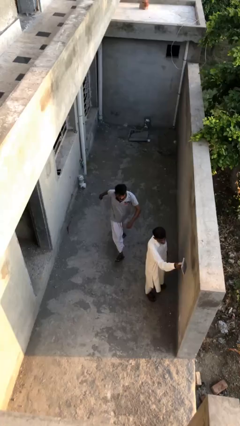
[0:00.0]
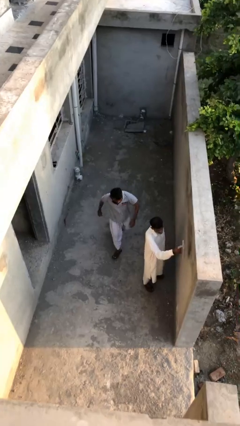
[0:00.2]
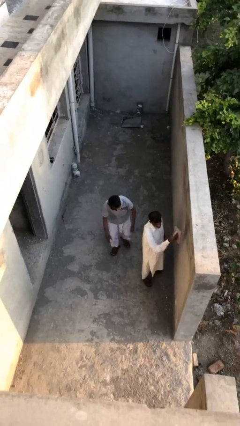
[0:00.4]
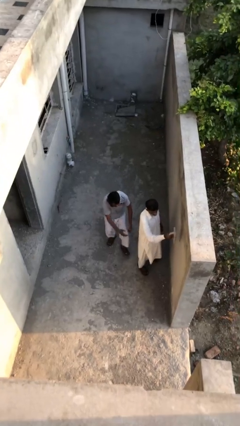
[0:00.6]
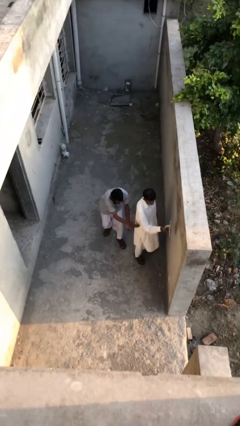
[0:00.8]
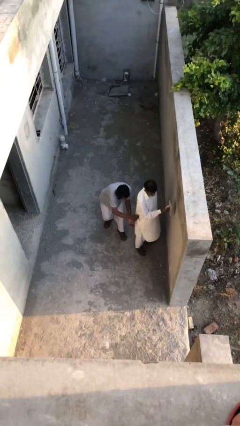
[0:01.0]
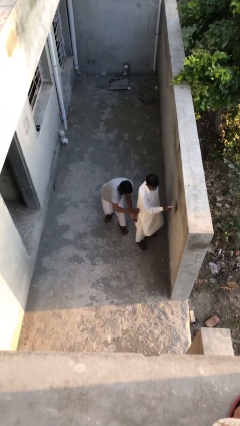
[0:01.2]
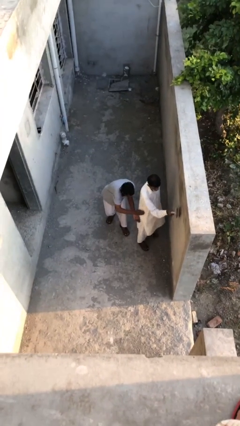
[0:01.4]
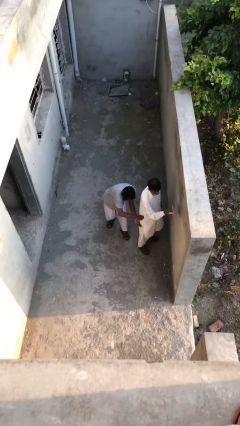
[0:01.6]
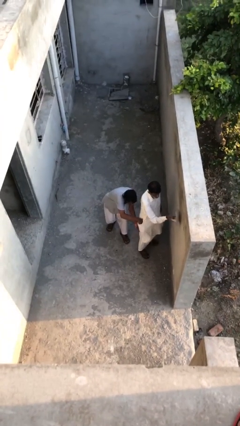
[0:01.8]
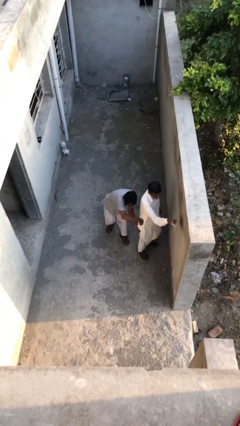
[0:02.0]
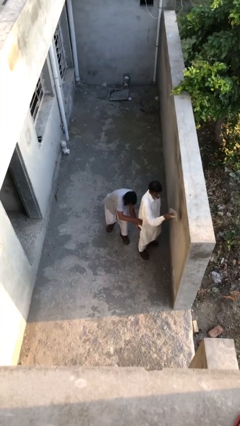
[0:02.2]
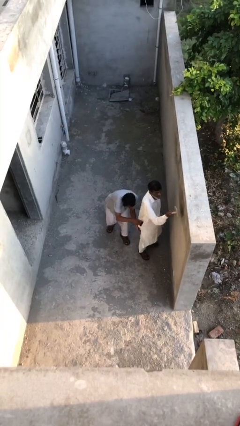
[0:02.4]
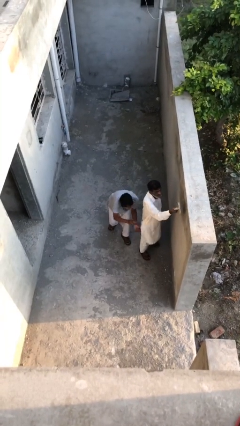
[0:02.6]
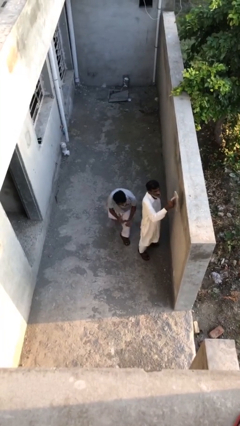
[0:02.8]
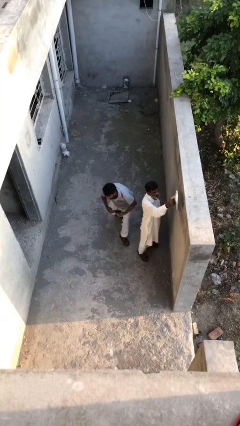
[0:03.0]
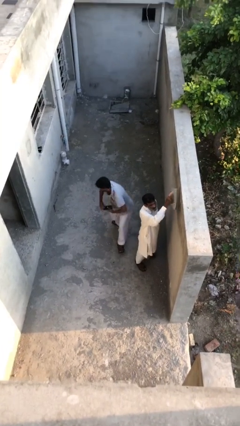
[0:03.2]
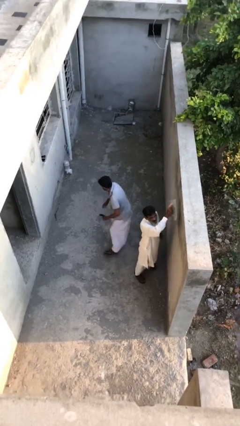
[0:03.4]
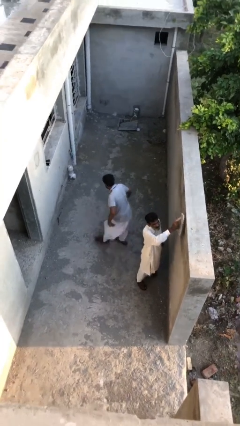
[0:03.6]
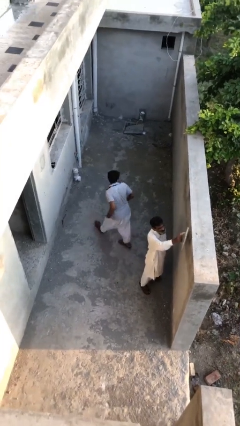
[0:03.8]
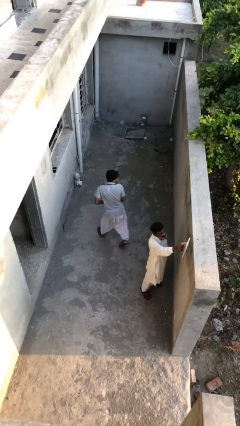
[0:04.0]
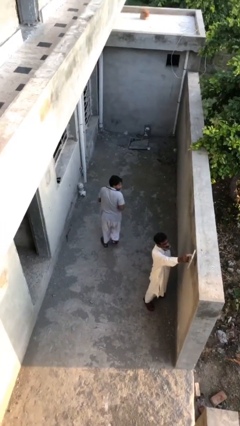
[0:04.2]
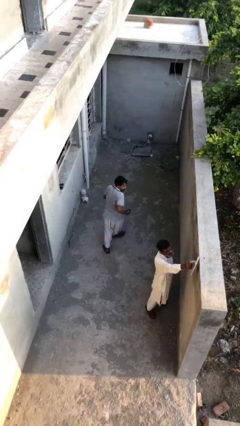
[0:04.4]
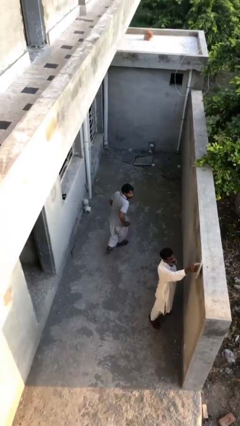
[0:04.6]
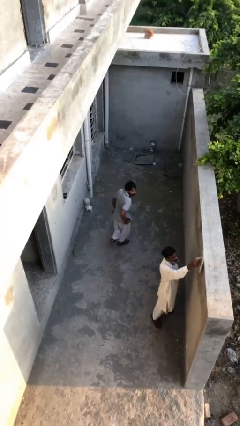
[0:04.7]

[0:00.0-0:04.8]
person steals object from person

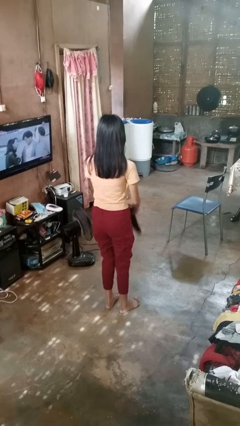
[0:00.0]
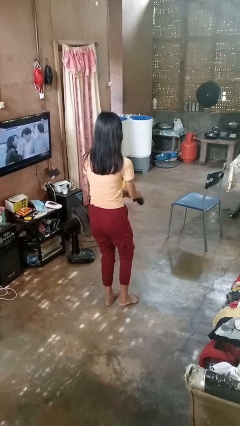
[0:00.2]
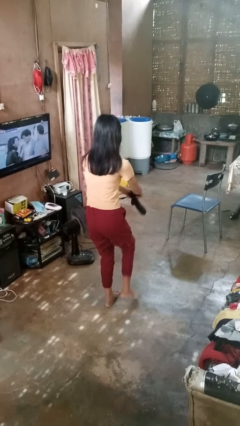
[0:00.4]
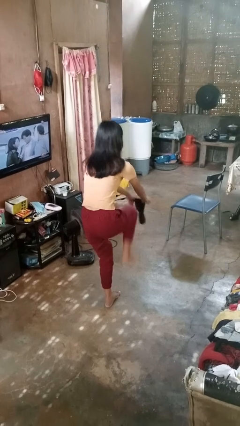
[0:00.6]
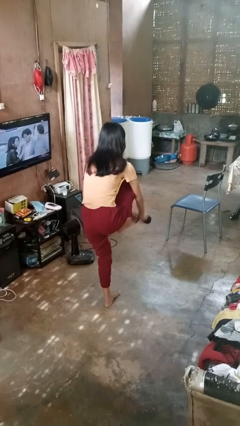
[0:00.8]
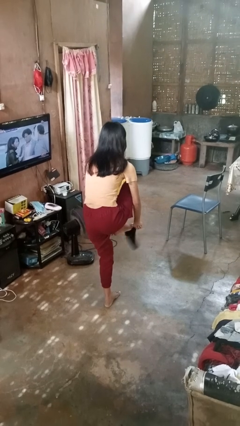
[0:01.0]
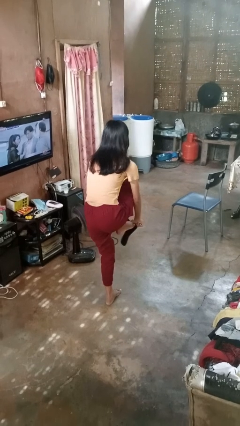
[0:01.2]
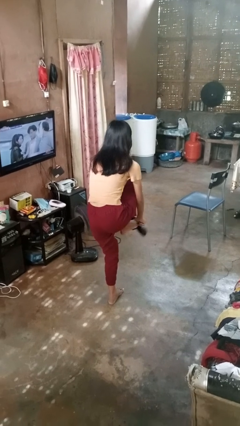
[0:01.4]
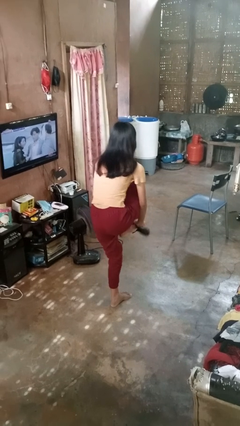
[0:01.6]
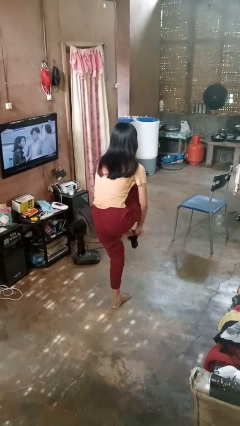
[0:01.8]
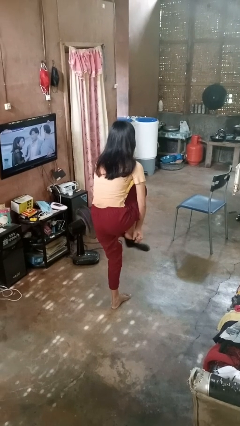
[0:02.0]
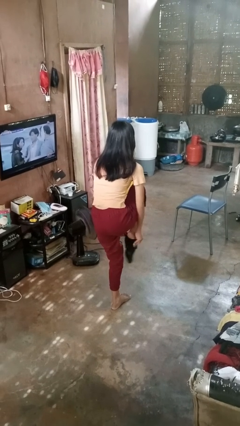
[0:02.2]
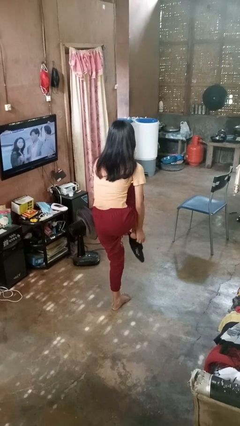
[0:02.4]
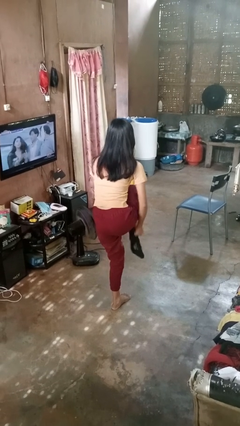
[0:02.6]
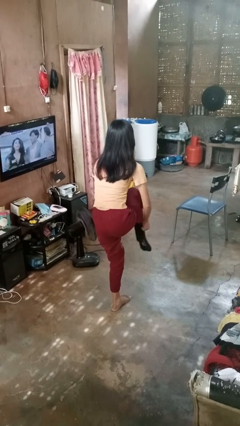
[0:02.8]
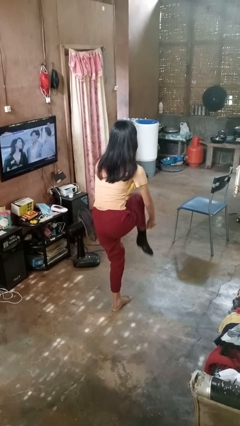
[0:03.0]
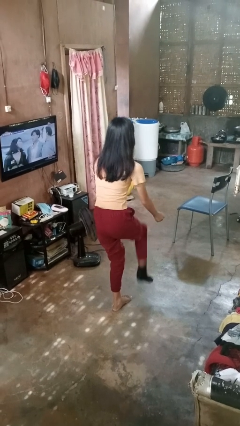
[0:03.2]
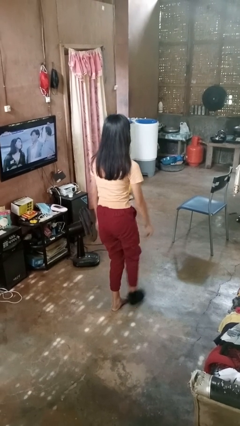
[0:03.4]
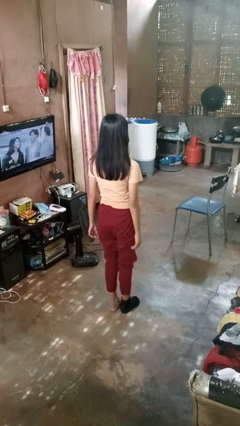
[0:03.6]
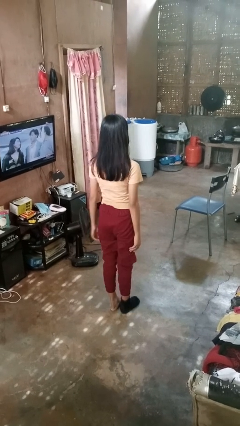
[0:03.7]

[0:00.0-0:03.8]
person puts on socks

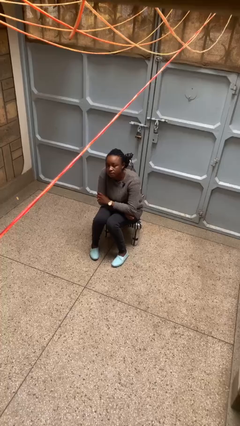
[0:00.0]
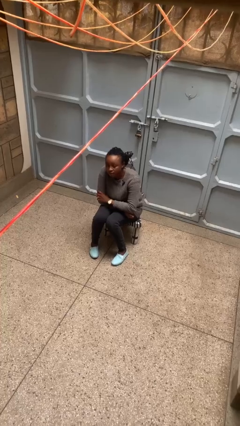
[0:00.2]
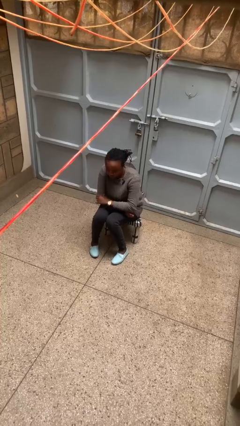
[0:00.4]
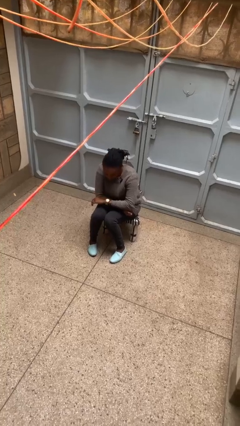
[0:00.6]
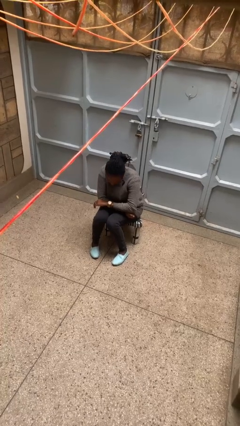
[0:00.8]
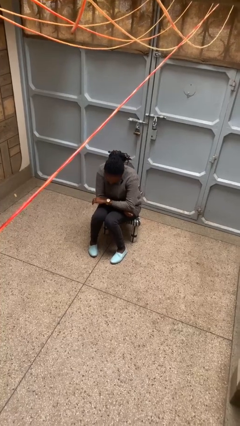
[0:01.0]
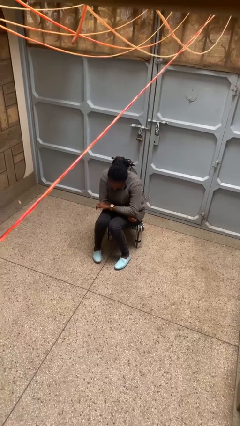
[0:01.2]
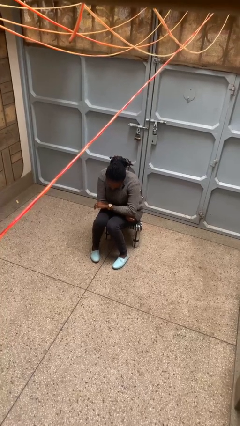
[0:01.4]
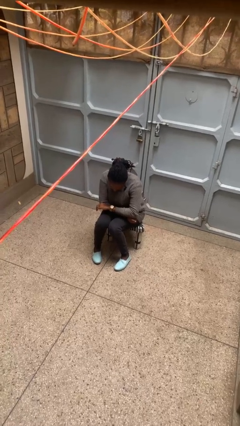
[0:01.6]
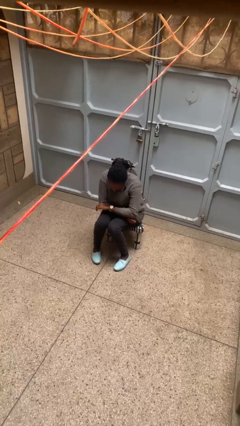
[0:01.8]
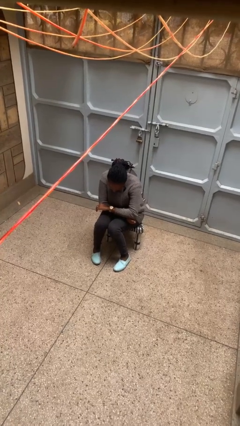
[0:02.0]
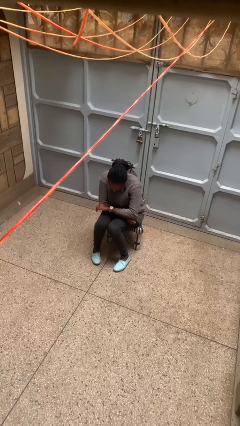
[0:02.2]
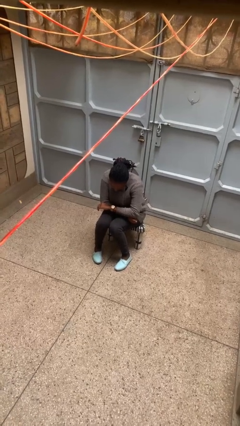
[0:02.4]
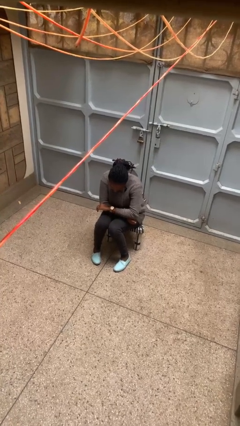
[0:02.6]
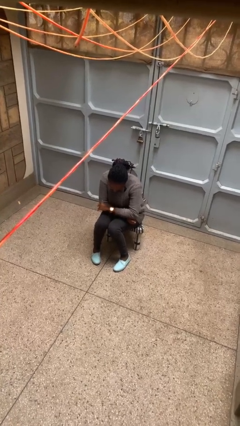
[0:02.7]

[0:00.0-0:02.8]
person looks at wristwatch

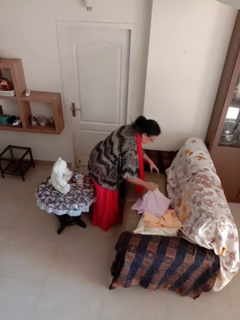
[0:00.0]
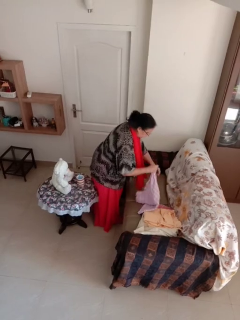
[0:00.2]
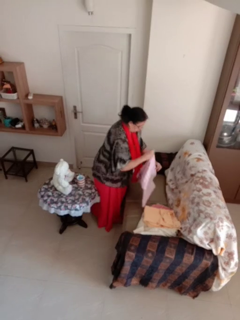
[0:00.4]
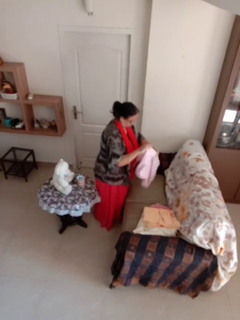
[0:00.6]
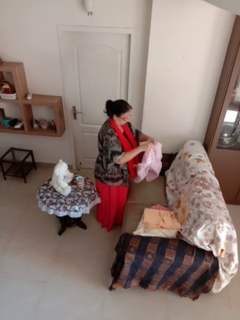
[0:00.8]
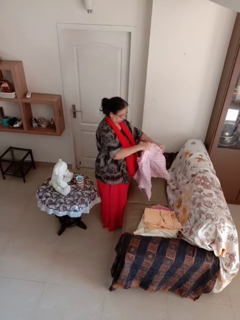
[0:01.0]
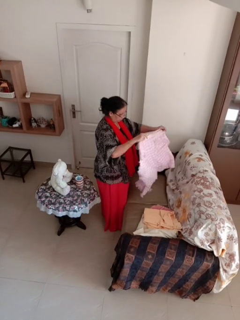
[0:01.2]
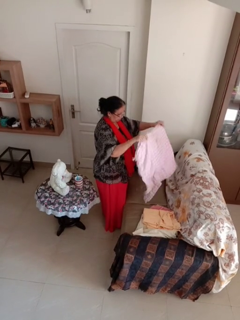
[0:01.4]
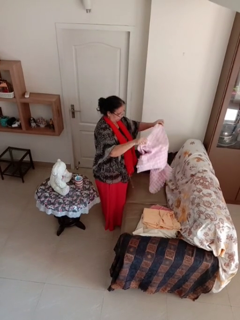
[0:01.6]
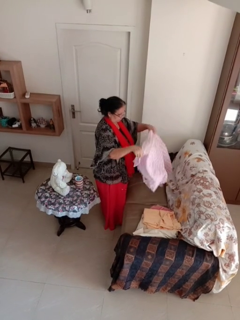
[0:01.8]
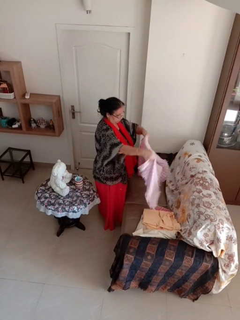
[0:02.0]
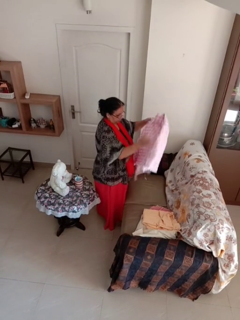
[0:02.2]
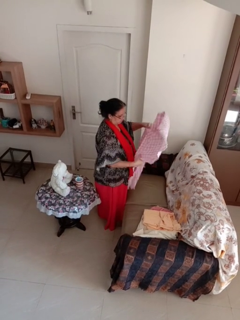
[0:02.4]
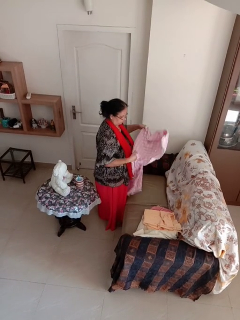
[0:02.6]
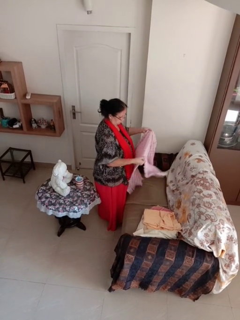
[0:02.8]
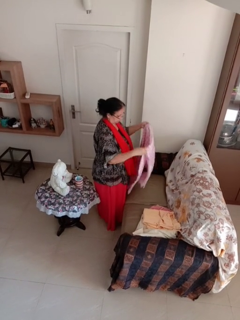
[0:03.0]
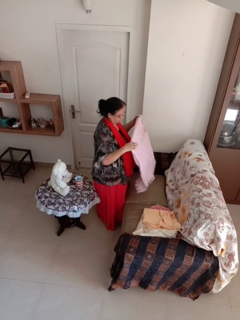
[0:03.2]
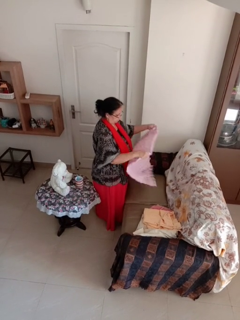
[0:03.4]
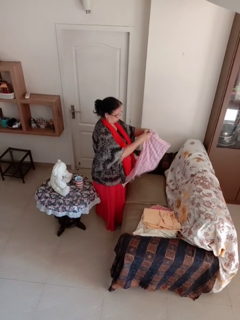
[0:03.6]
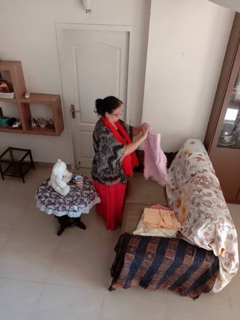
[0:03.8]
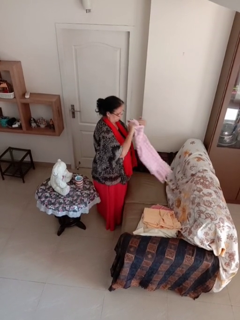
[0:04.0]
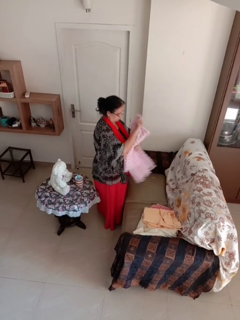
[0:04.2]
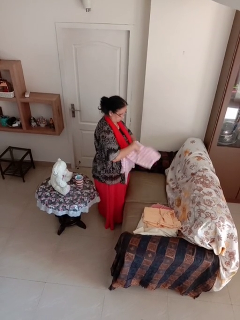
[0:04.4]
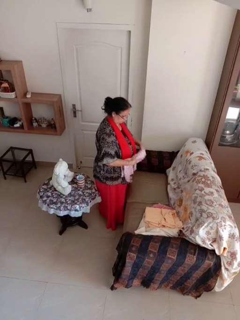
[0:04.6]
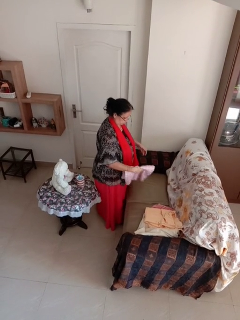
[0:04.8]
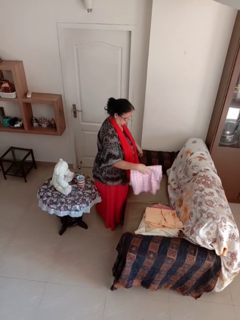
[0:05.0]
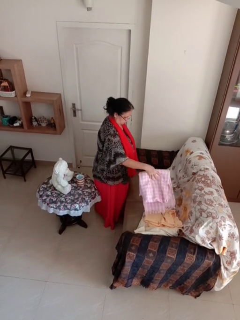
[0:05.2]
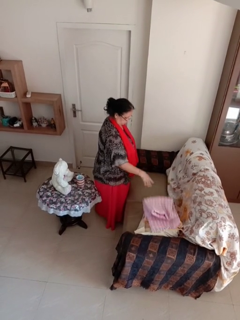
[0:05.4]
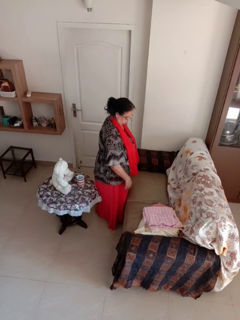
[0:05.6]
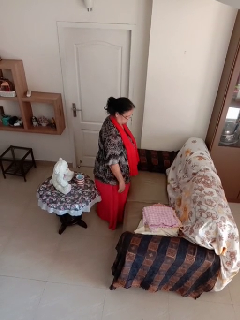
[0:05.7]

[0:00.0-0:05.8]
person folds towel

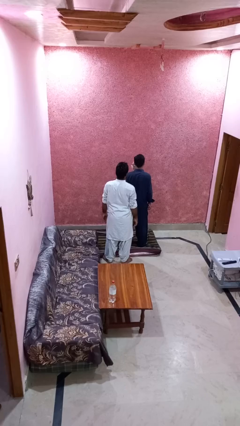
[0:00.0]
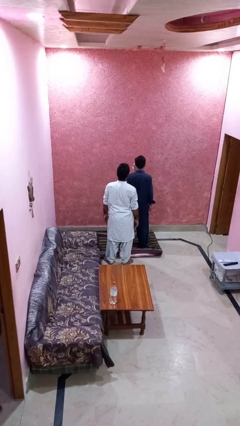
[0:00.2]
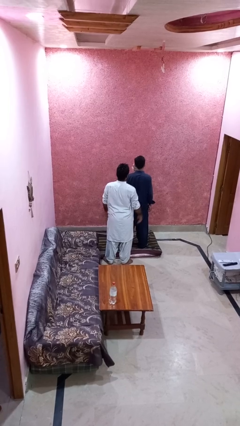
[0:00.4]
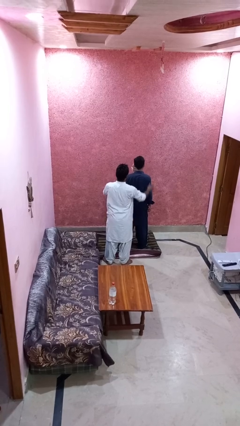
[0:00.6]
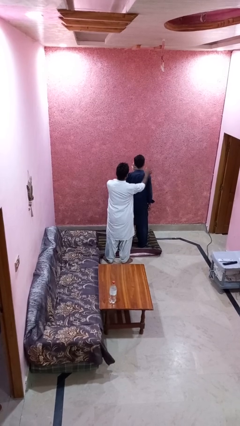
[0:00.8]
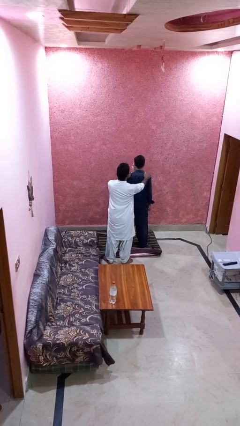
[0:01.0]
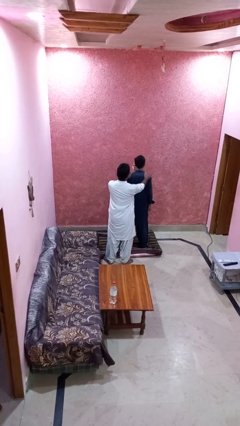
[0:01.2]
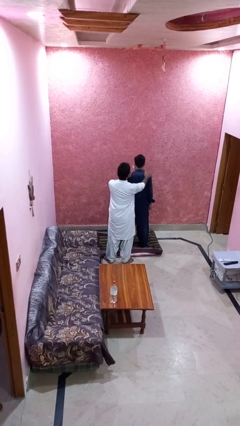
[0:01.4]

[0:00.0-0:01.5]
person grabs person by shoulder

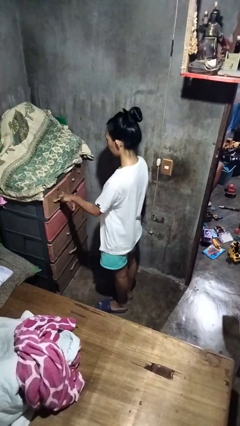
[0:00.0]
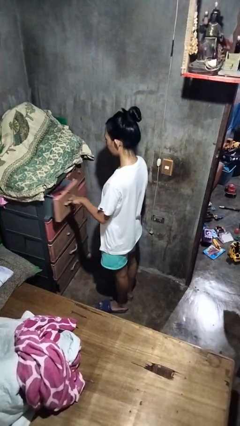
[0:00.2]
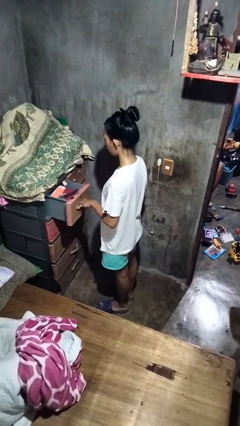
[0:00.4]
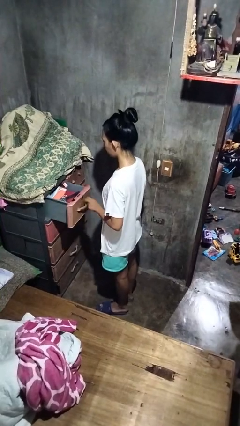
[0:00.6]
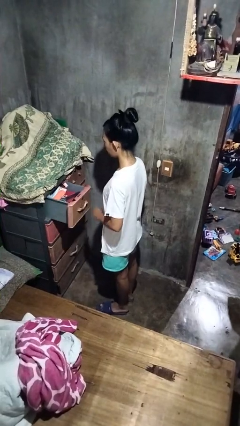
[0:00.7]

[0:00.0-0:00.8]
person opens dresser drawer
